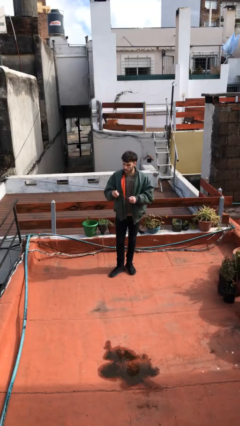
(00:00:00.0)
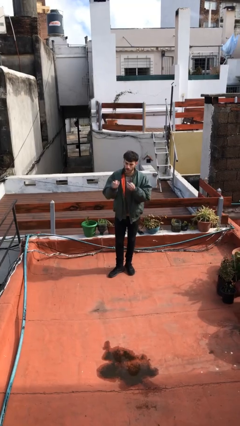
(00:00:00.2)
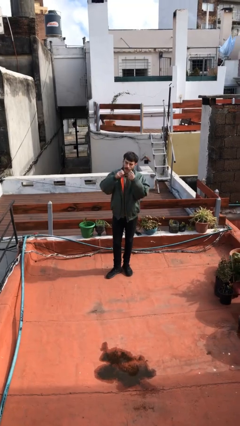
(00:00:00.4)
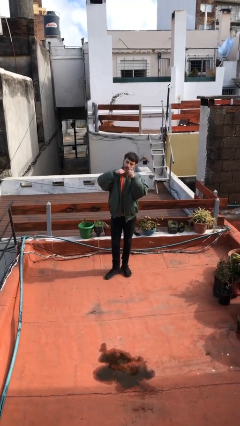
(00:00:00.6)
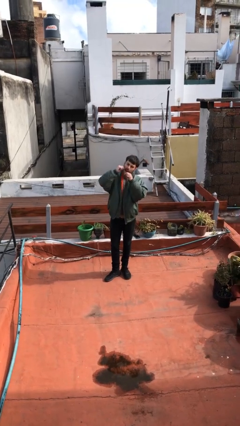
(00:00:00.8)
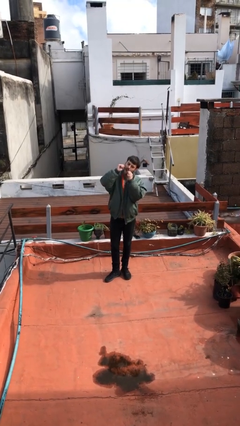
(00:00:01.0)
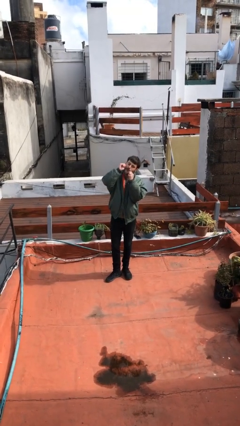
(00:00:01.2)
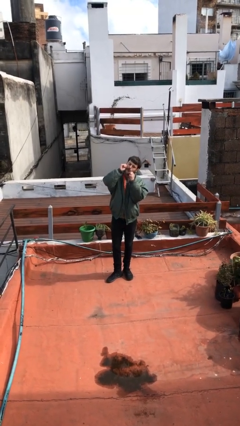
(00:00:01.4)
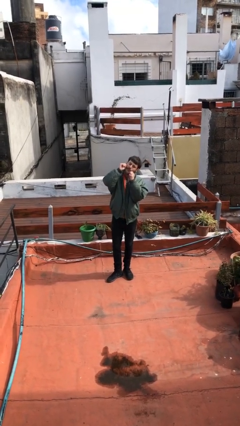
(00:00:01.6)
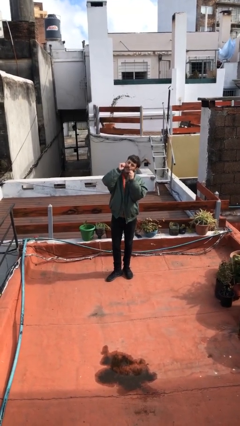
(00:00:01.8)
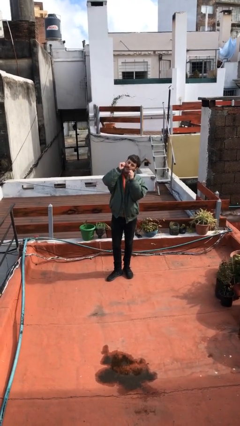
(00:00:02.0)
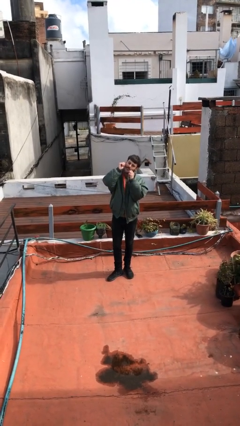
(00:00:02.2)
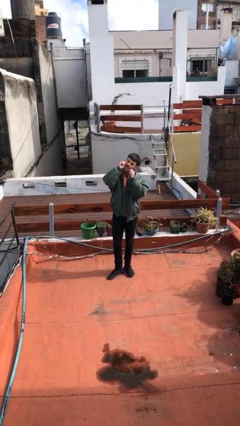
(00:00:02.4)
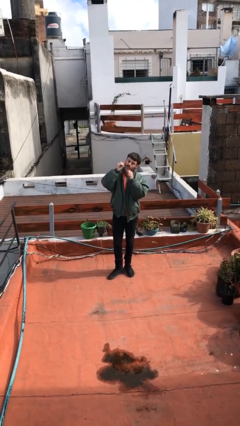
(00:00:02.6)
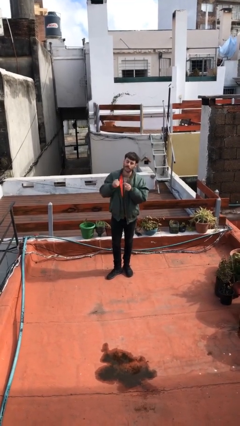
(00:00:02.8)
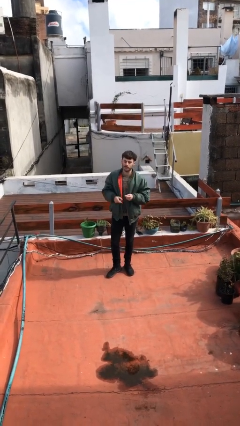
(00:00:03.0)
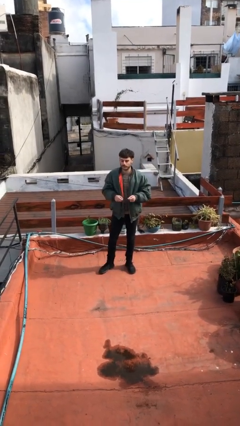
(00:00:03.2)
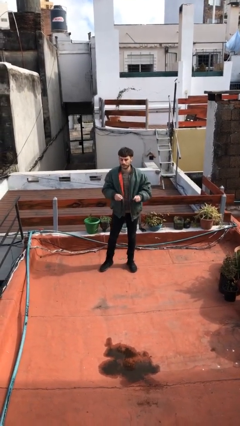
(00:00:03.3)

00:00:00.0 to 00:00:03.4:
person flosses

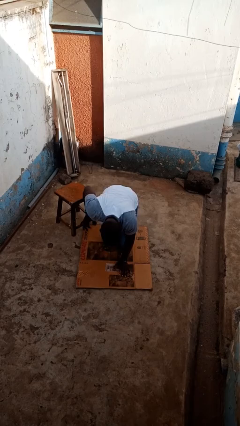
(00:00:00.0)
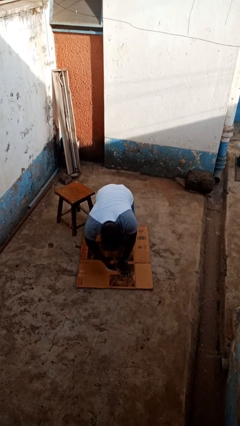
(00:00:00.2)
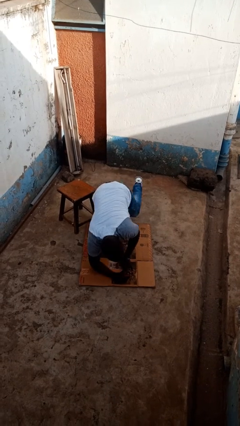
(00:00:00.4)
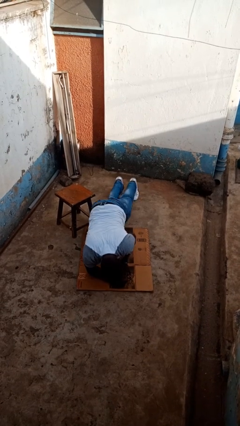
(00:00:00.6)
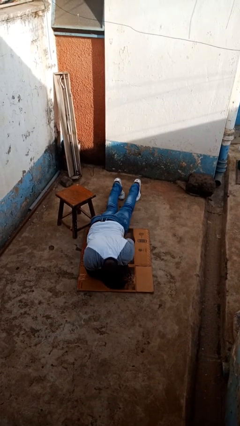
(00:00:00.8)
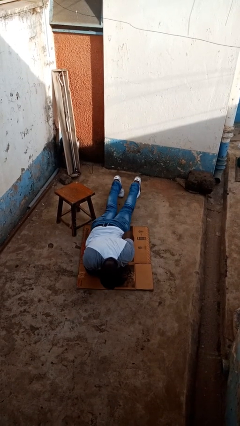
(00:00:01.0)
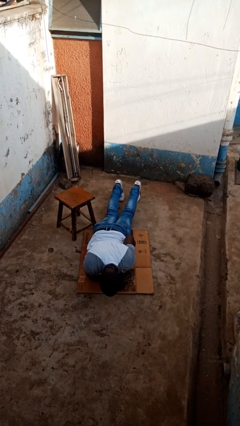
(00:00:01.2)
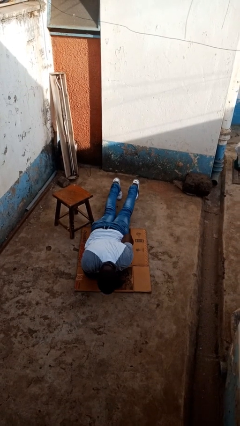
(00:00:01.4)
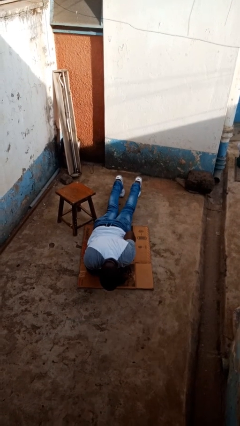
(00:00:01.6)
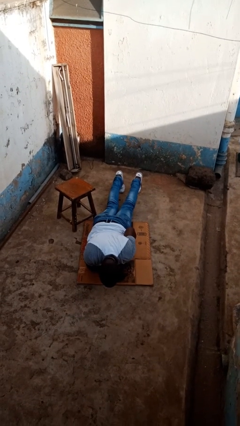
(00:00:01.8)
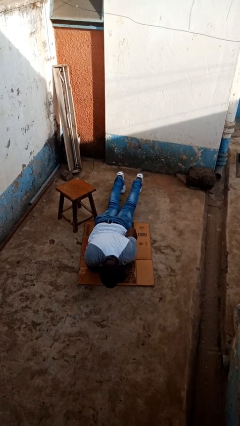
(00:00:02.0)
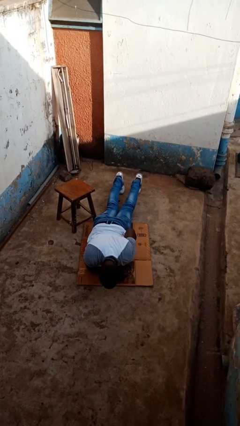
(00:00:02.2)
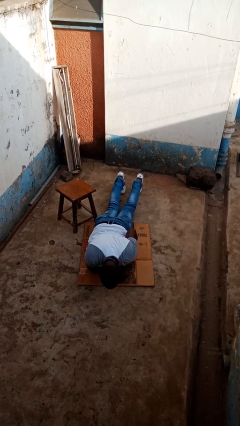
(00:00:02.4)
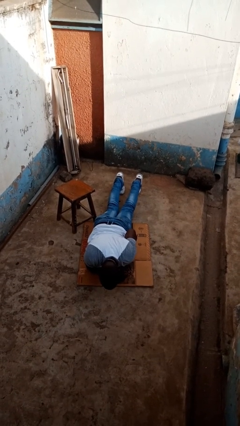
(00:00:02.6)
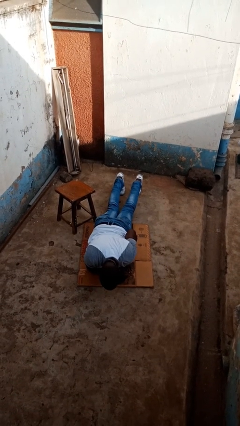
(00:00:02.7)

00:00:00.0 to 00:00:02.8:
person lies down on floor

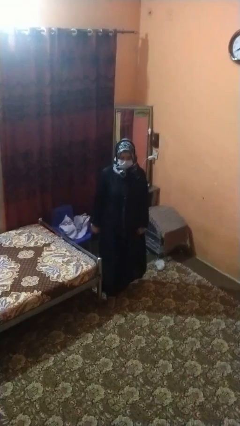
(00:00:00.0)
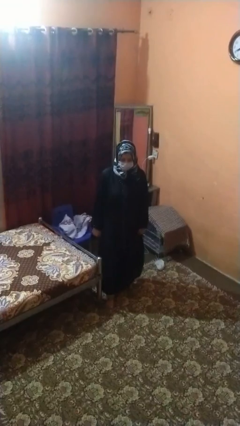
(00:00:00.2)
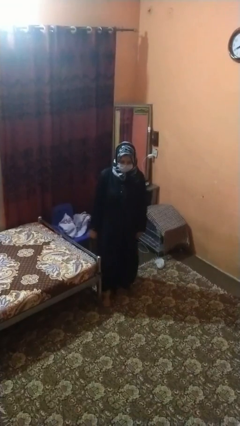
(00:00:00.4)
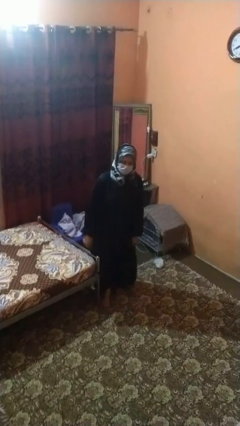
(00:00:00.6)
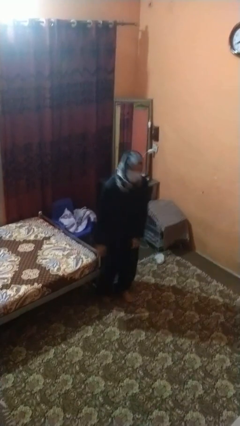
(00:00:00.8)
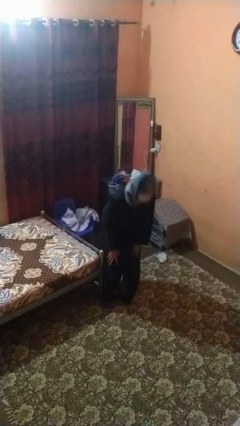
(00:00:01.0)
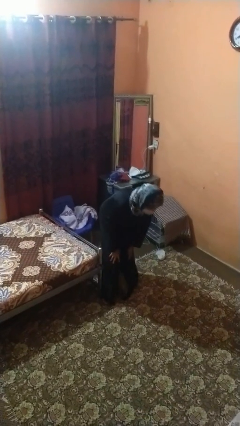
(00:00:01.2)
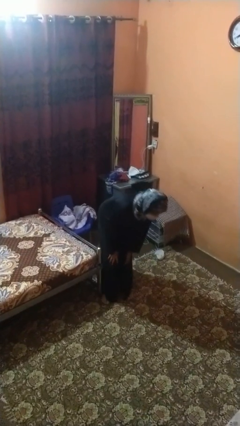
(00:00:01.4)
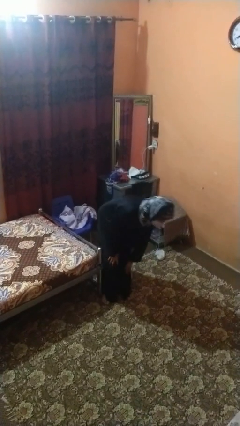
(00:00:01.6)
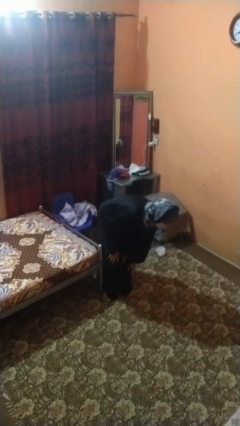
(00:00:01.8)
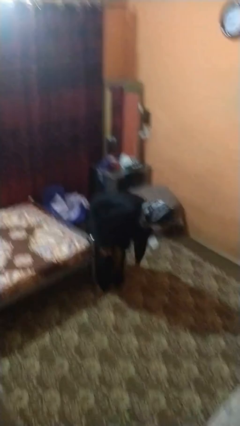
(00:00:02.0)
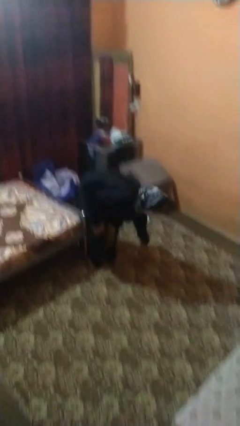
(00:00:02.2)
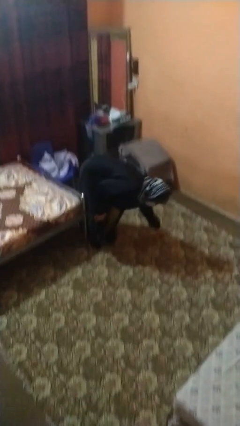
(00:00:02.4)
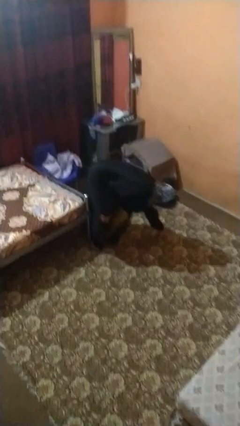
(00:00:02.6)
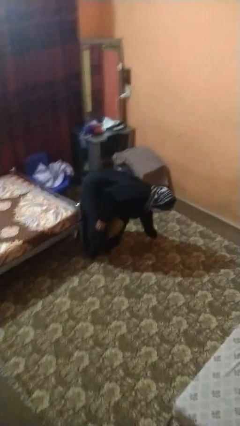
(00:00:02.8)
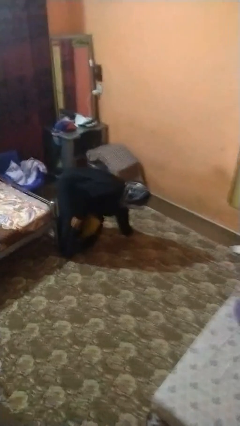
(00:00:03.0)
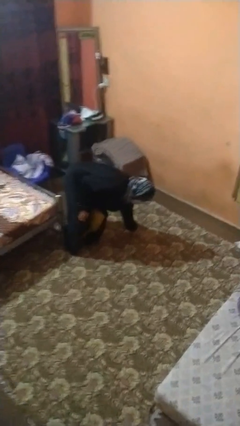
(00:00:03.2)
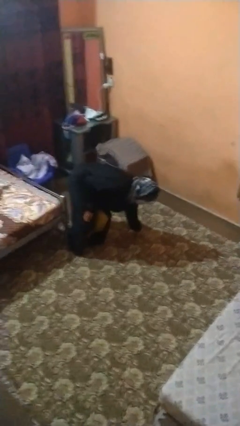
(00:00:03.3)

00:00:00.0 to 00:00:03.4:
person trips on object on floor

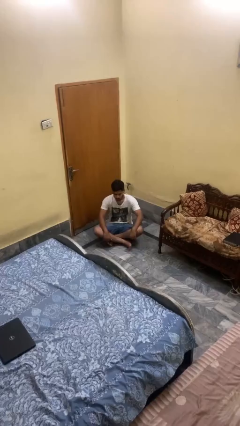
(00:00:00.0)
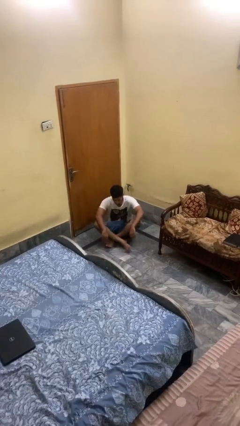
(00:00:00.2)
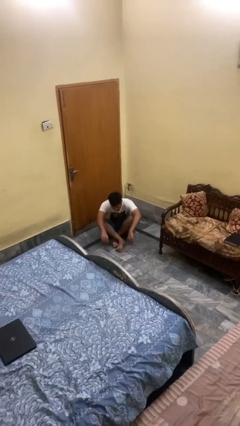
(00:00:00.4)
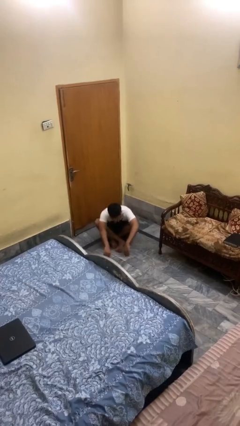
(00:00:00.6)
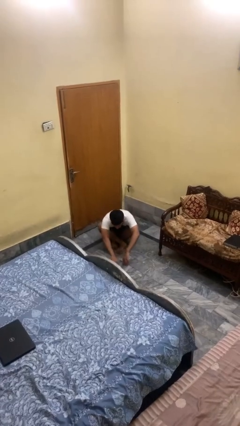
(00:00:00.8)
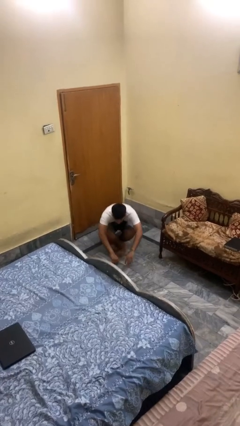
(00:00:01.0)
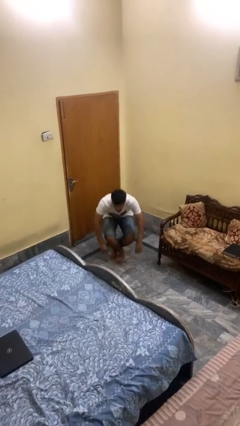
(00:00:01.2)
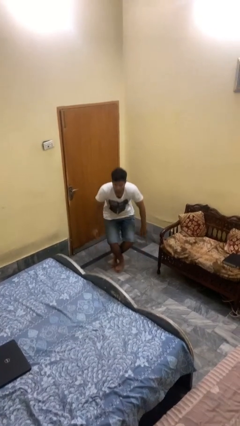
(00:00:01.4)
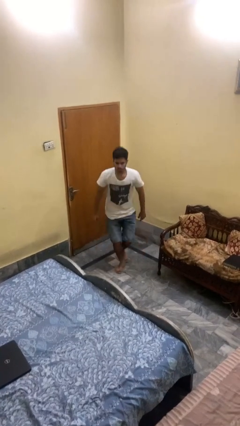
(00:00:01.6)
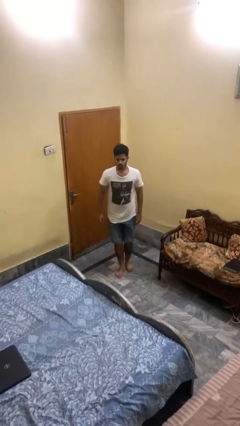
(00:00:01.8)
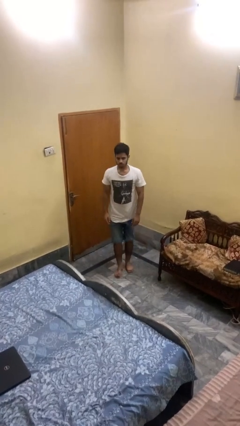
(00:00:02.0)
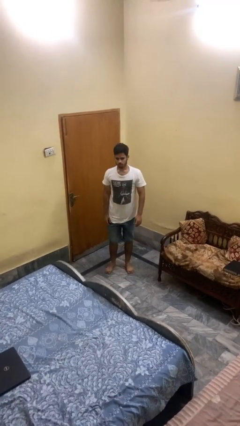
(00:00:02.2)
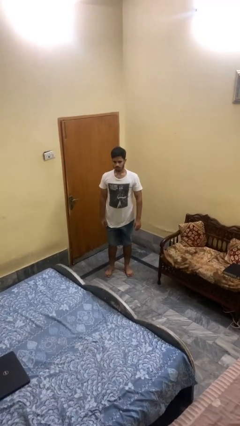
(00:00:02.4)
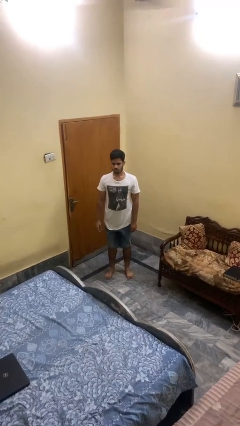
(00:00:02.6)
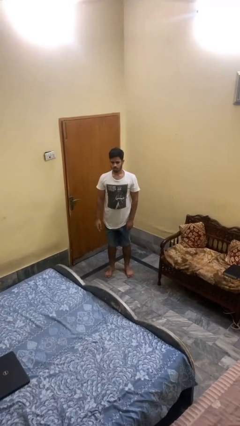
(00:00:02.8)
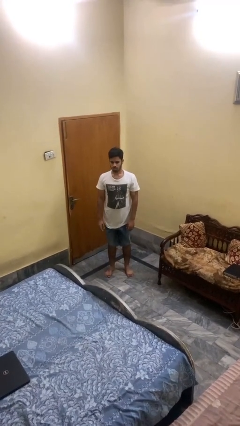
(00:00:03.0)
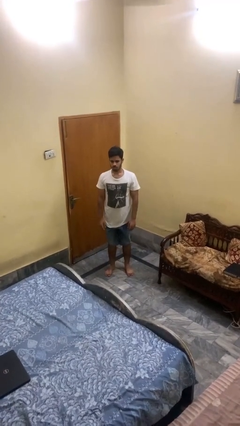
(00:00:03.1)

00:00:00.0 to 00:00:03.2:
person stands up from floor

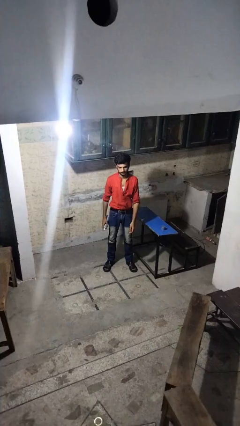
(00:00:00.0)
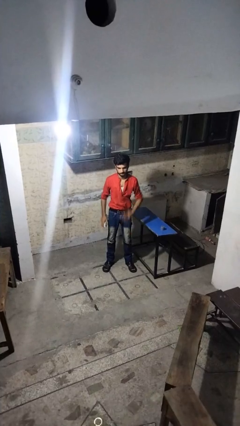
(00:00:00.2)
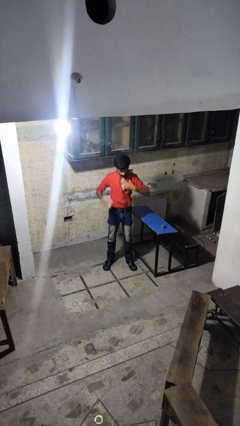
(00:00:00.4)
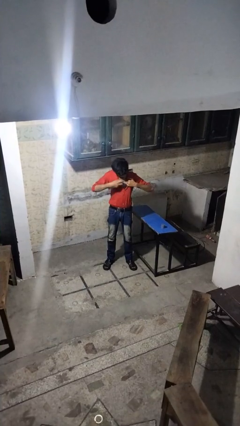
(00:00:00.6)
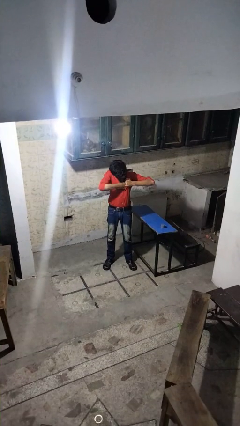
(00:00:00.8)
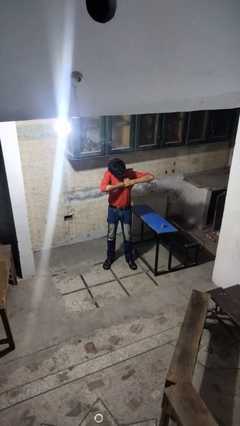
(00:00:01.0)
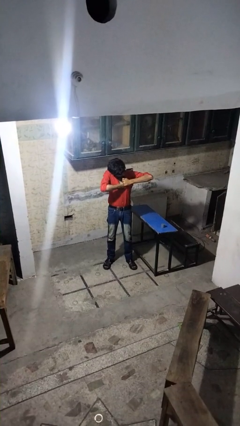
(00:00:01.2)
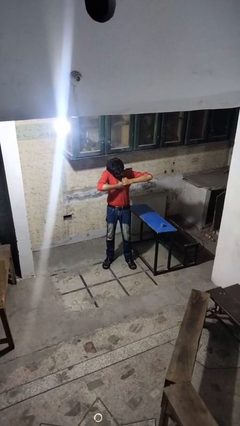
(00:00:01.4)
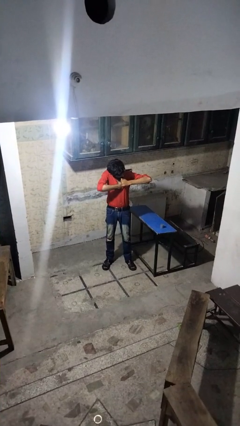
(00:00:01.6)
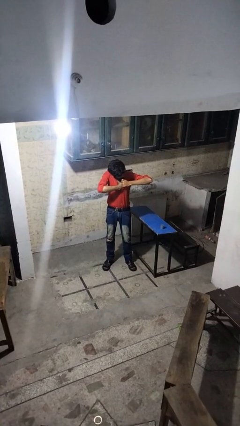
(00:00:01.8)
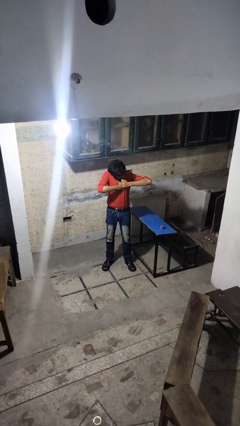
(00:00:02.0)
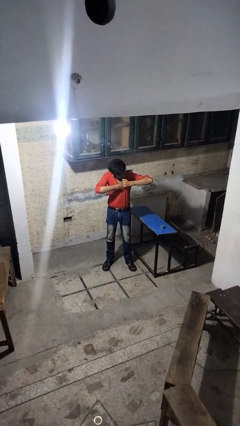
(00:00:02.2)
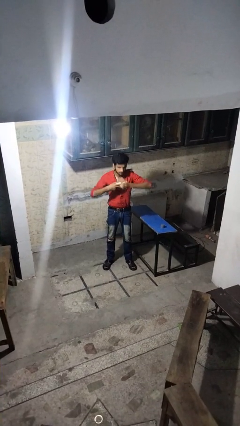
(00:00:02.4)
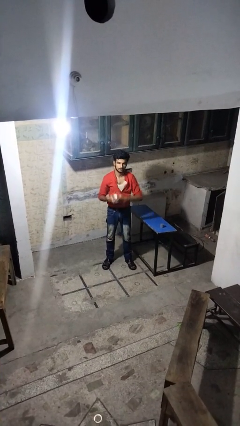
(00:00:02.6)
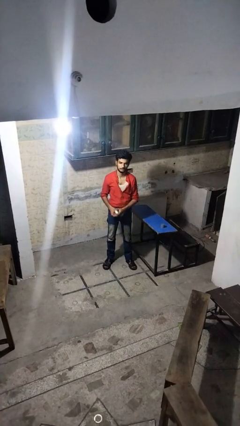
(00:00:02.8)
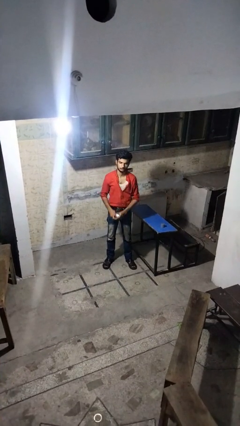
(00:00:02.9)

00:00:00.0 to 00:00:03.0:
person applies deodorant

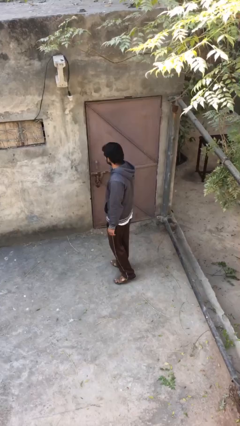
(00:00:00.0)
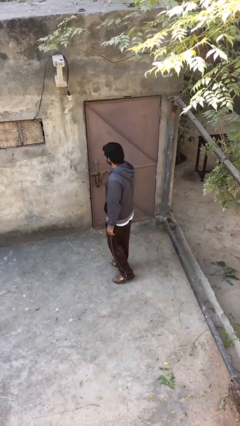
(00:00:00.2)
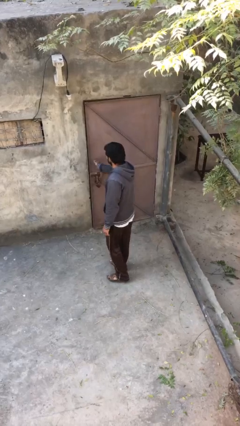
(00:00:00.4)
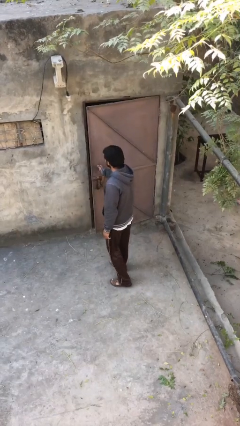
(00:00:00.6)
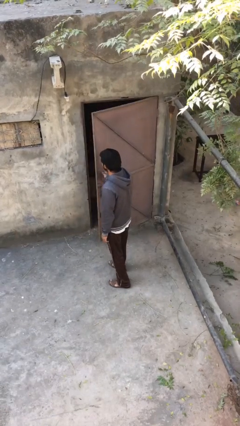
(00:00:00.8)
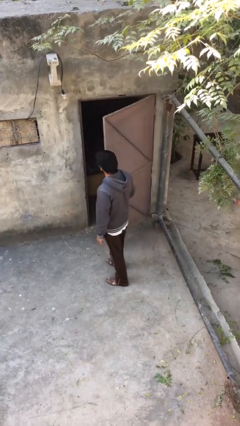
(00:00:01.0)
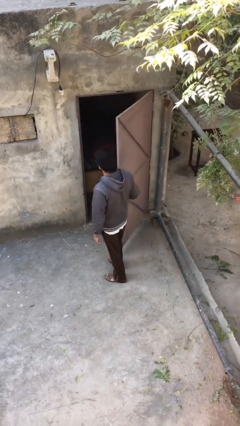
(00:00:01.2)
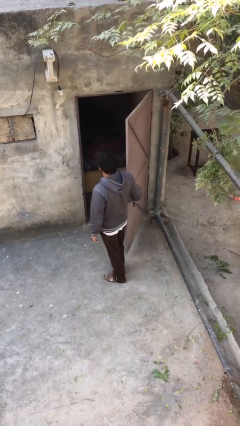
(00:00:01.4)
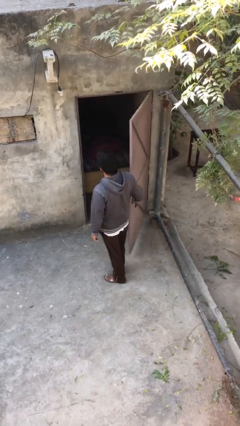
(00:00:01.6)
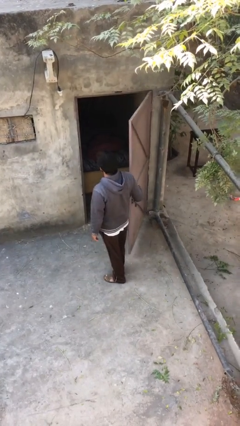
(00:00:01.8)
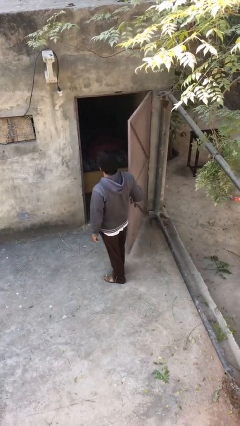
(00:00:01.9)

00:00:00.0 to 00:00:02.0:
person opens facility door
